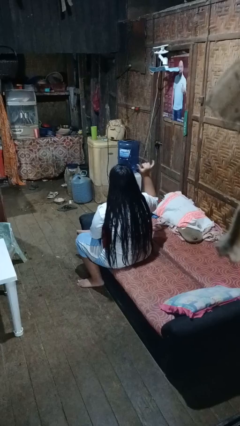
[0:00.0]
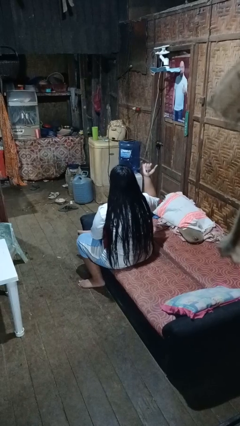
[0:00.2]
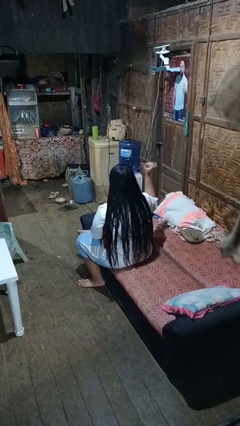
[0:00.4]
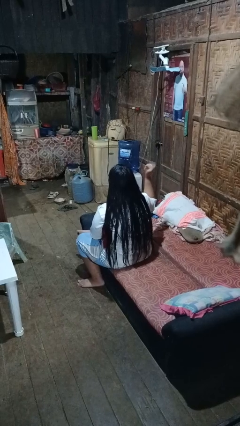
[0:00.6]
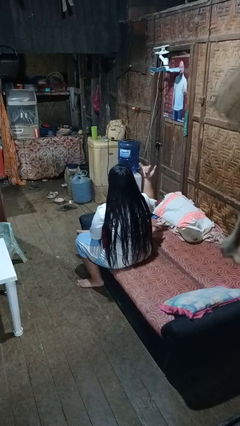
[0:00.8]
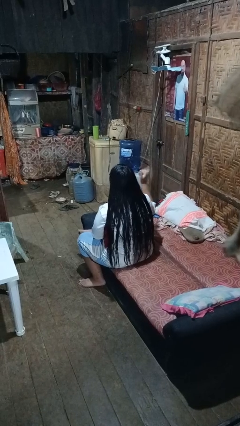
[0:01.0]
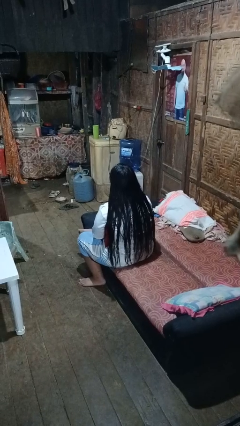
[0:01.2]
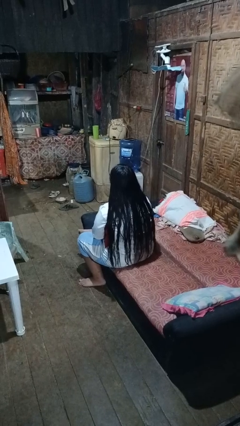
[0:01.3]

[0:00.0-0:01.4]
person gestures hang loose

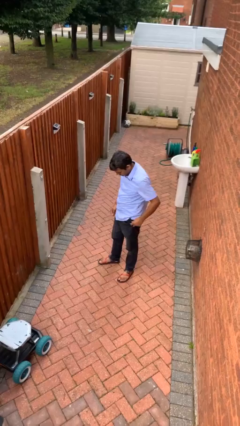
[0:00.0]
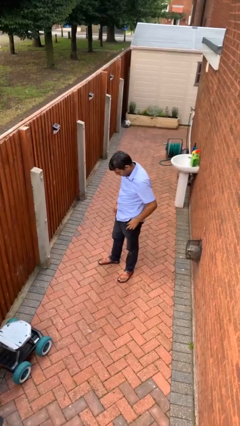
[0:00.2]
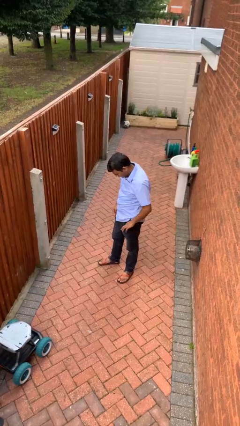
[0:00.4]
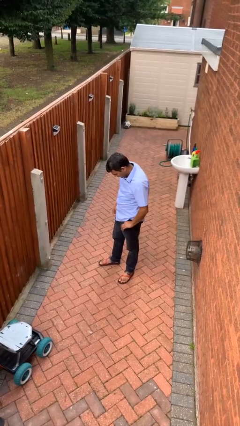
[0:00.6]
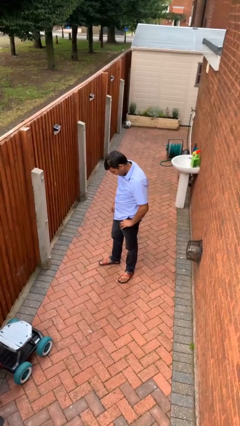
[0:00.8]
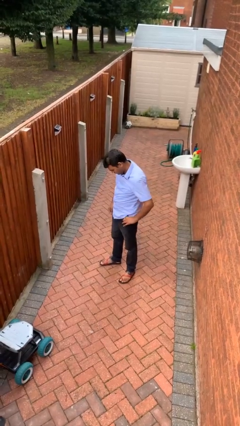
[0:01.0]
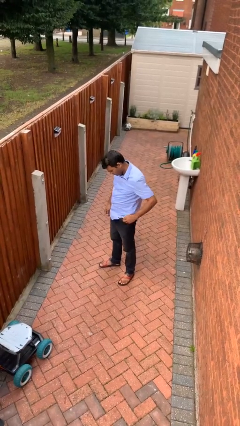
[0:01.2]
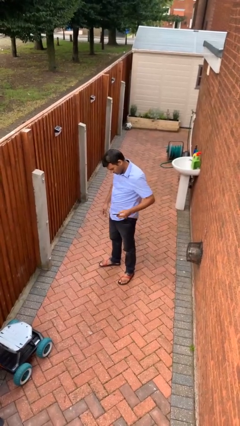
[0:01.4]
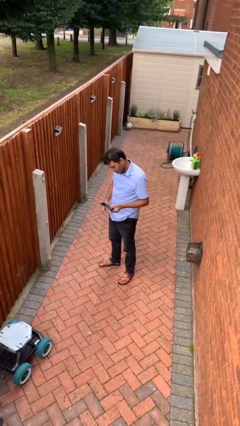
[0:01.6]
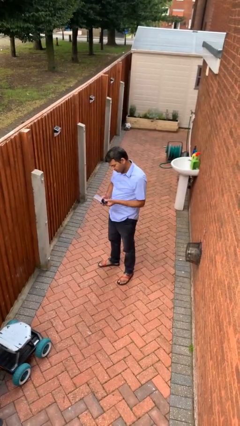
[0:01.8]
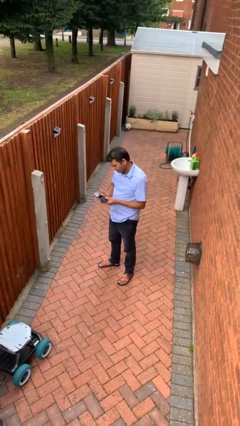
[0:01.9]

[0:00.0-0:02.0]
person takes phone from pocket

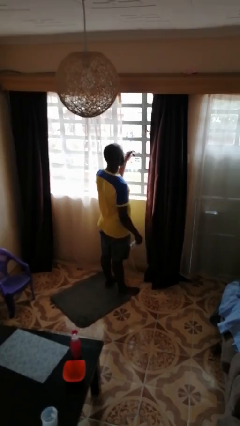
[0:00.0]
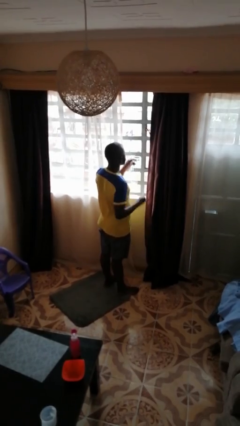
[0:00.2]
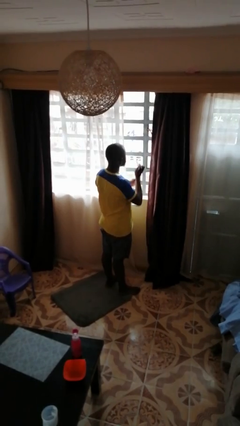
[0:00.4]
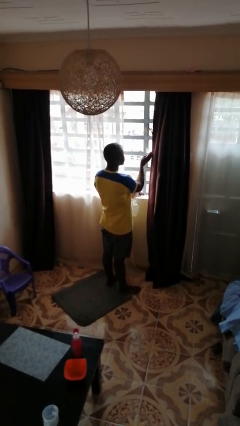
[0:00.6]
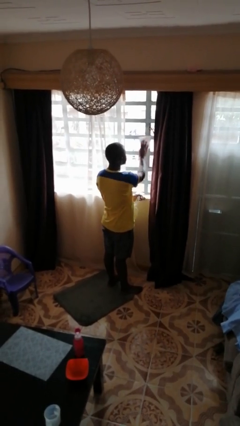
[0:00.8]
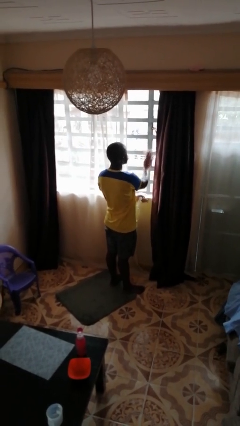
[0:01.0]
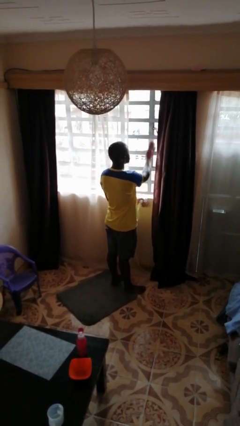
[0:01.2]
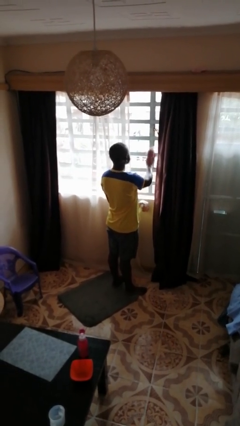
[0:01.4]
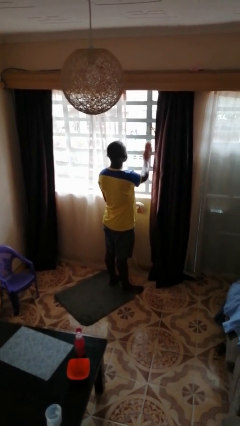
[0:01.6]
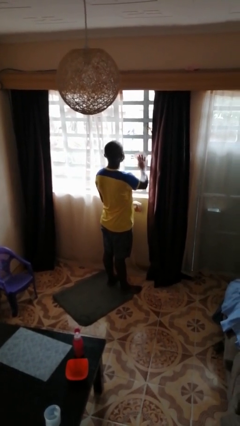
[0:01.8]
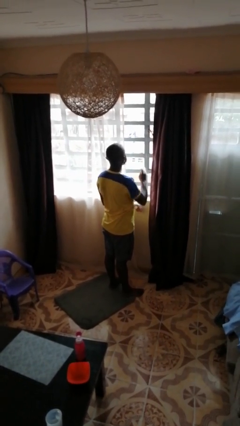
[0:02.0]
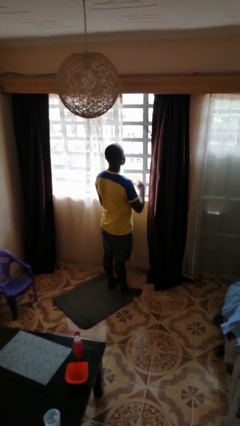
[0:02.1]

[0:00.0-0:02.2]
person washes window

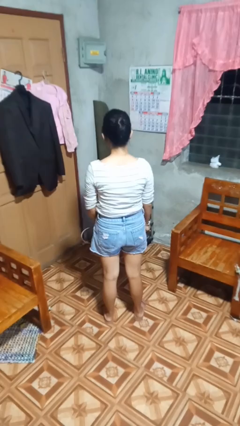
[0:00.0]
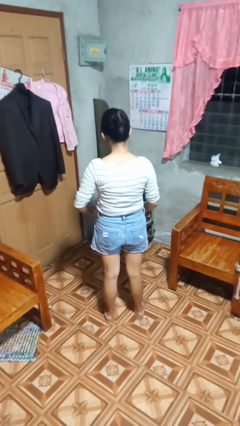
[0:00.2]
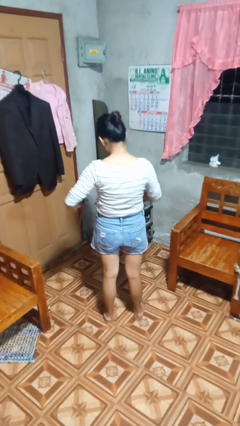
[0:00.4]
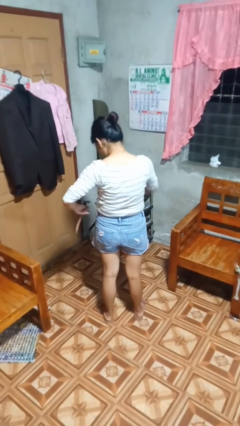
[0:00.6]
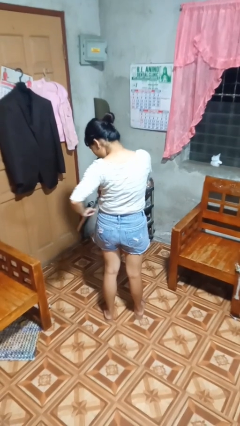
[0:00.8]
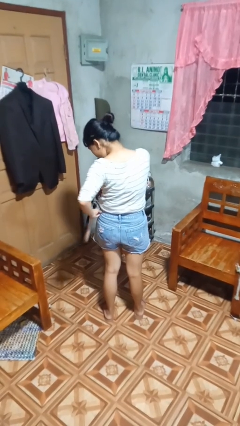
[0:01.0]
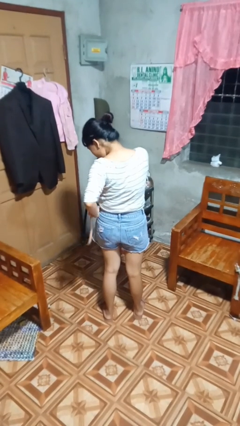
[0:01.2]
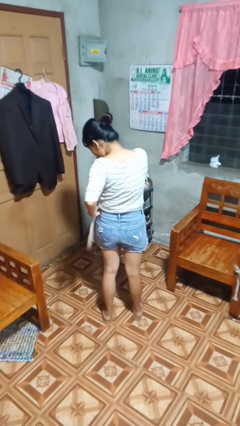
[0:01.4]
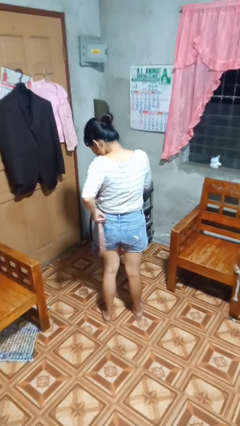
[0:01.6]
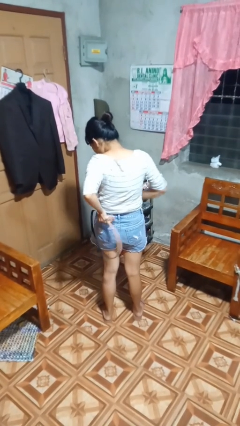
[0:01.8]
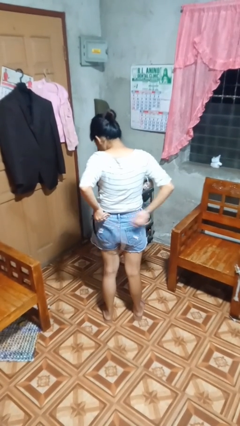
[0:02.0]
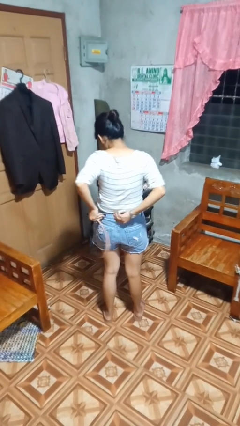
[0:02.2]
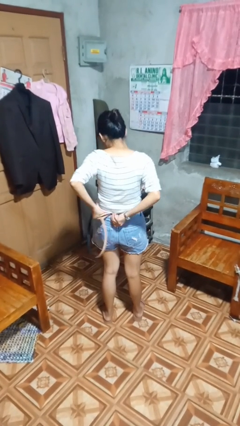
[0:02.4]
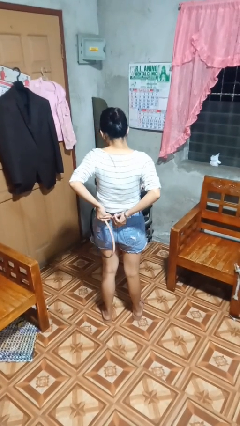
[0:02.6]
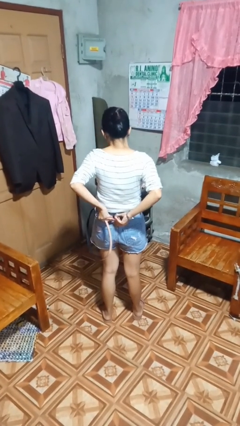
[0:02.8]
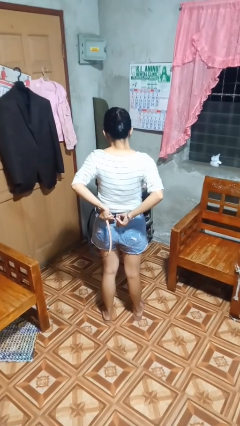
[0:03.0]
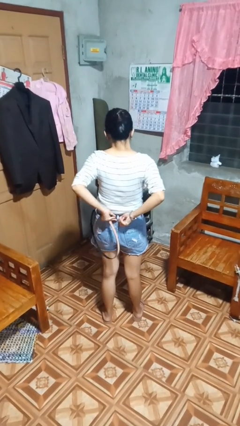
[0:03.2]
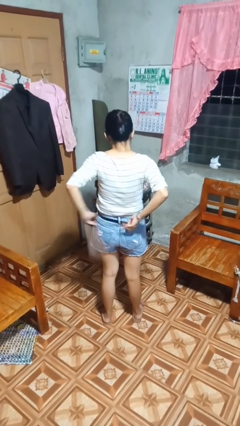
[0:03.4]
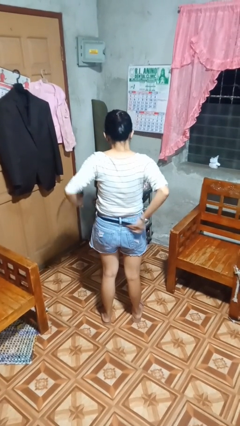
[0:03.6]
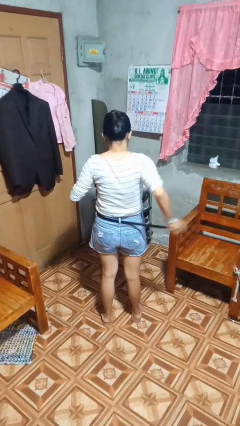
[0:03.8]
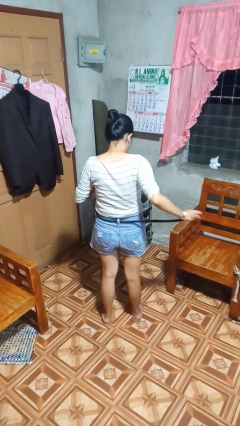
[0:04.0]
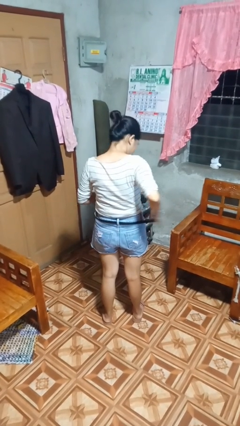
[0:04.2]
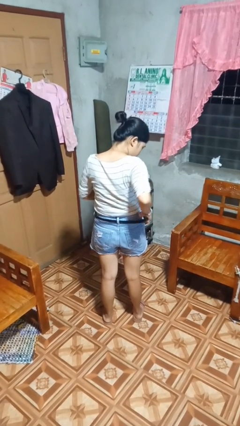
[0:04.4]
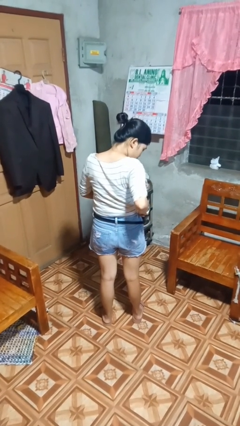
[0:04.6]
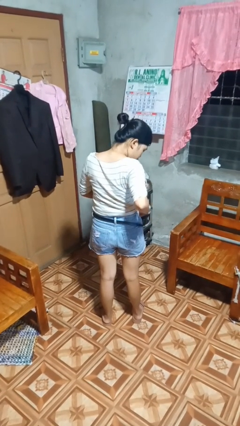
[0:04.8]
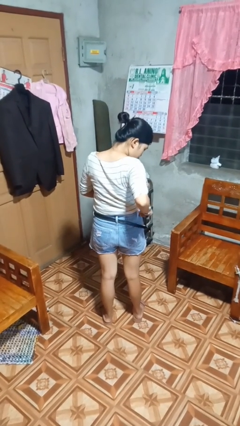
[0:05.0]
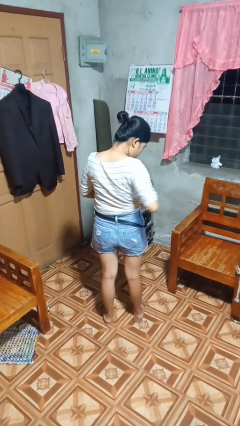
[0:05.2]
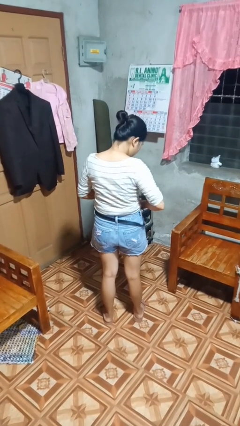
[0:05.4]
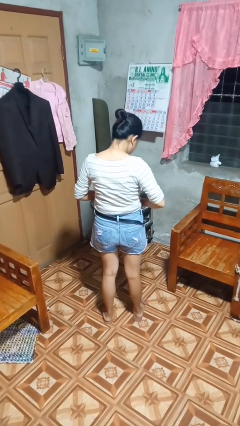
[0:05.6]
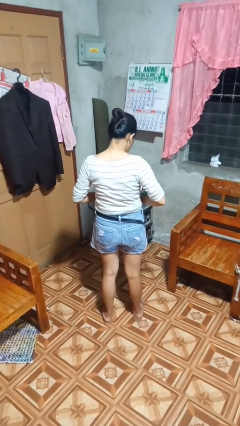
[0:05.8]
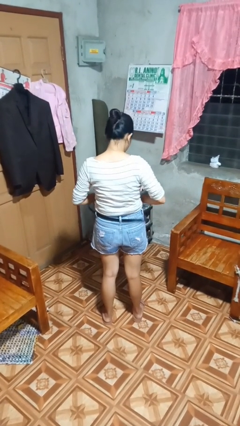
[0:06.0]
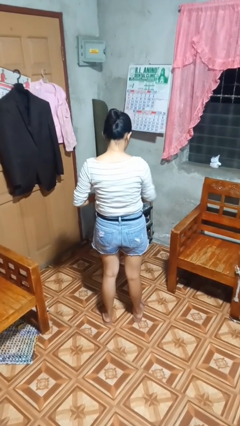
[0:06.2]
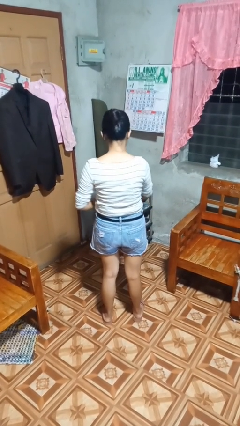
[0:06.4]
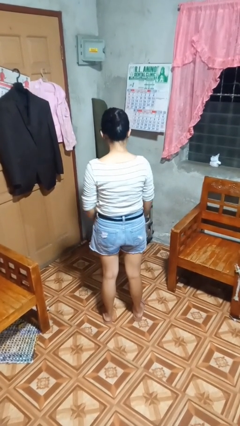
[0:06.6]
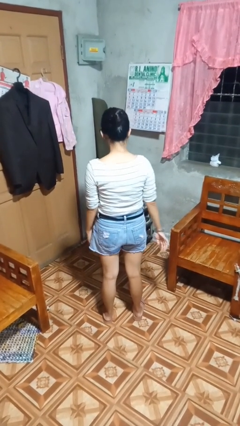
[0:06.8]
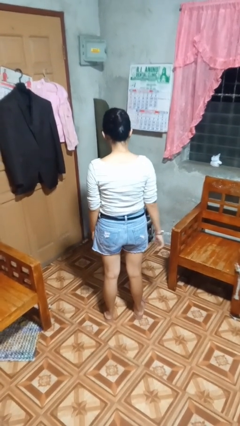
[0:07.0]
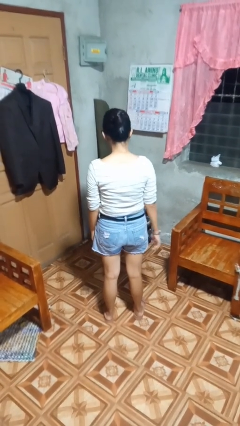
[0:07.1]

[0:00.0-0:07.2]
person puts on belt

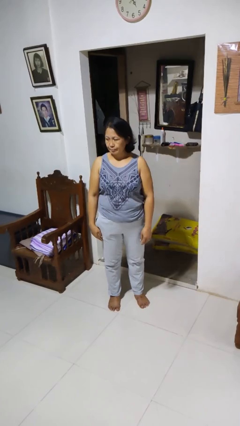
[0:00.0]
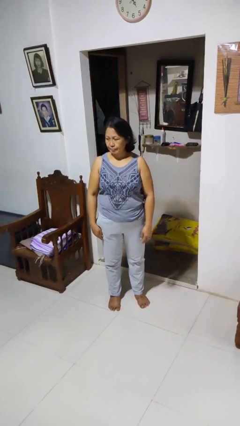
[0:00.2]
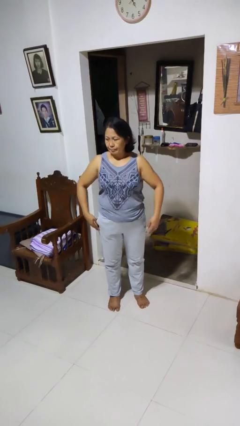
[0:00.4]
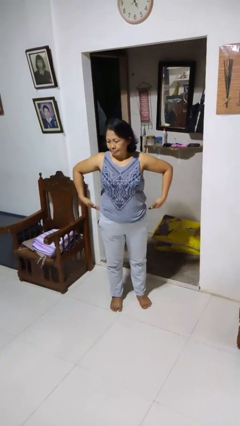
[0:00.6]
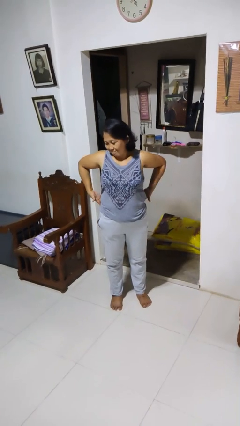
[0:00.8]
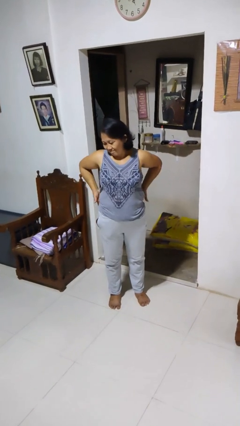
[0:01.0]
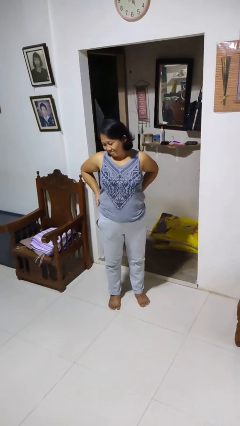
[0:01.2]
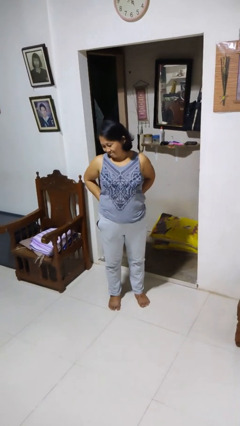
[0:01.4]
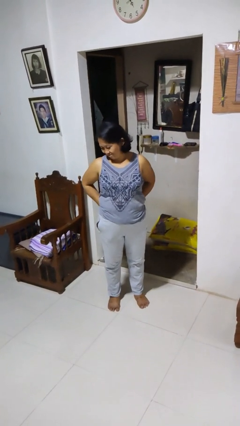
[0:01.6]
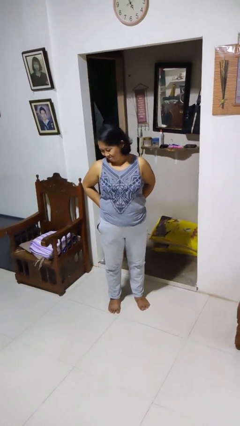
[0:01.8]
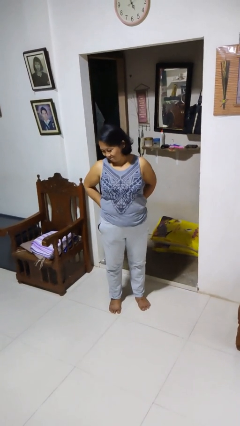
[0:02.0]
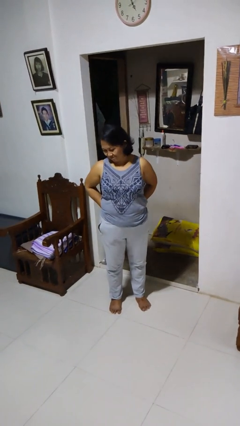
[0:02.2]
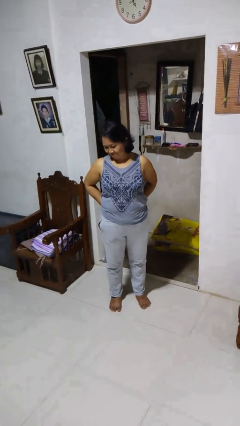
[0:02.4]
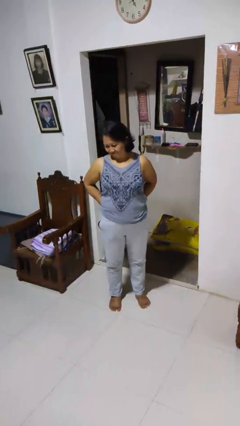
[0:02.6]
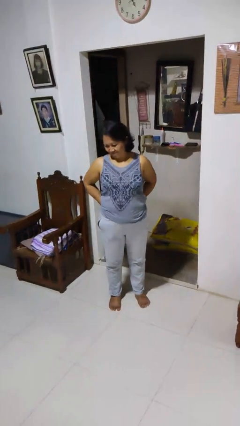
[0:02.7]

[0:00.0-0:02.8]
person puts hands in back pockets

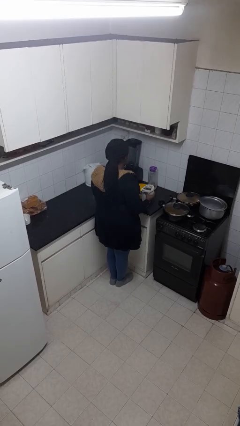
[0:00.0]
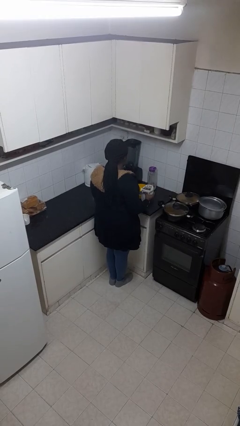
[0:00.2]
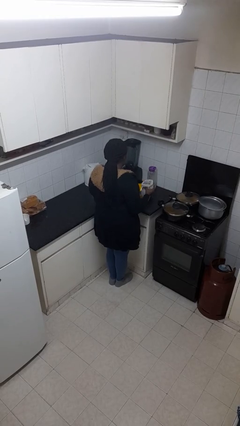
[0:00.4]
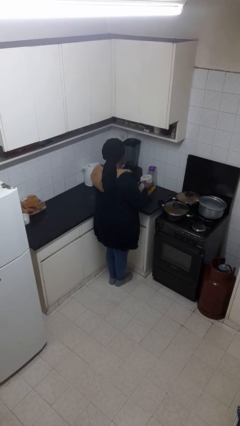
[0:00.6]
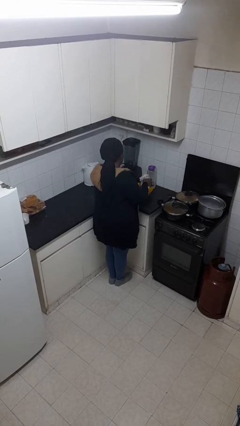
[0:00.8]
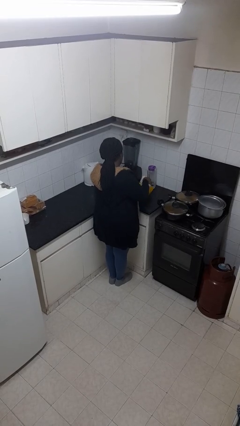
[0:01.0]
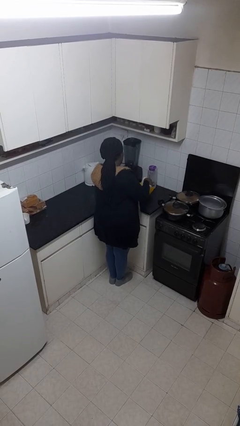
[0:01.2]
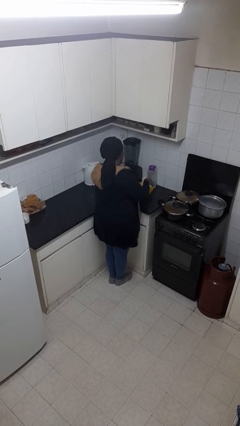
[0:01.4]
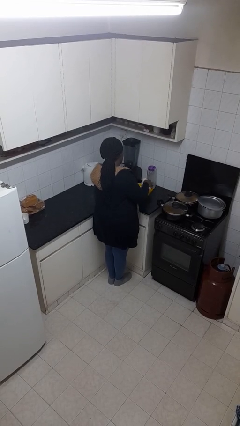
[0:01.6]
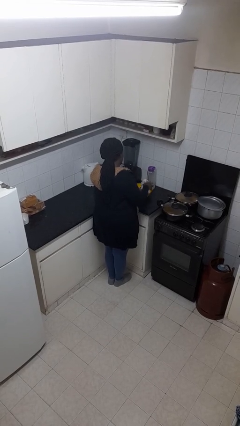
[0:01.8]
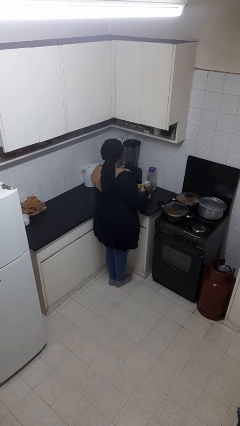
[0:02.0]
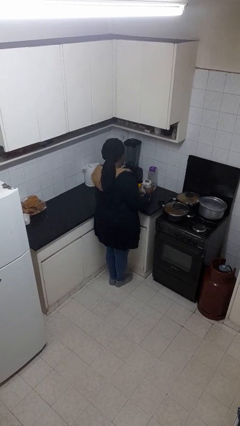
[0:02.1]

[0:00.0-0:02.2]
person pours into bowl
